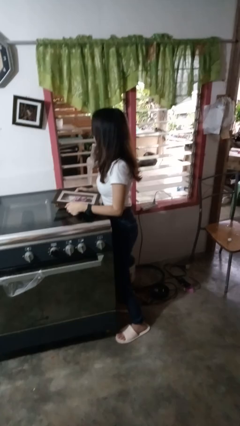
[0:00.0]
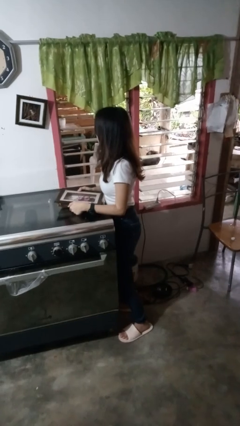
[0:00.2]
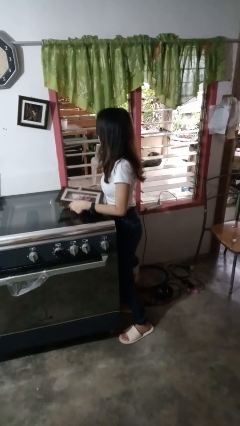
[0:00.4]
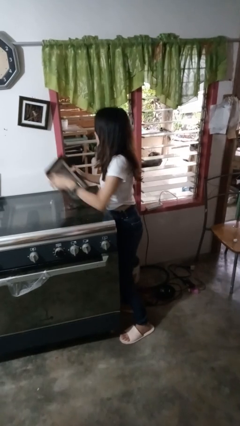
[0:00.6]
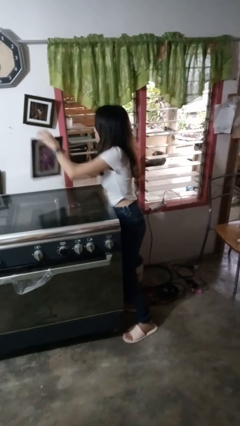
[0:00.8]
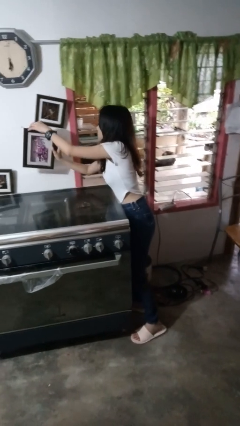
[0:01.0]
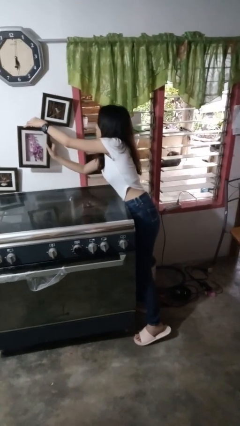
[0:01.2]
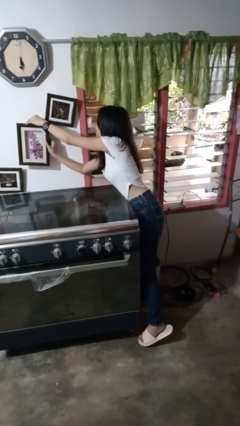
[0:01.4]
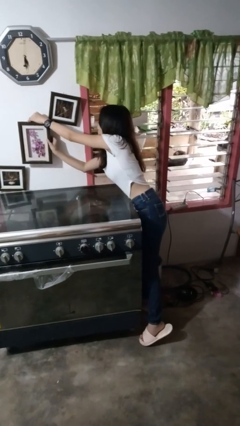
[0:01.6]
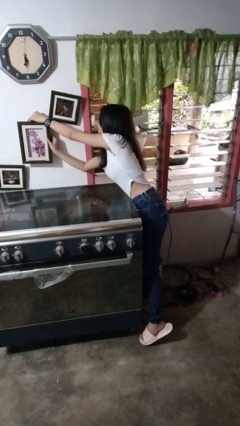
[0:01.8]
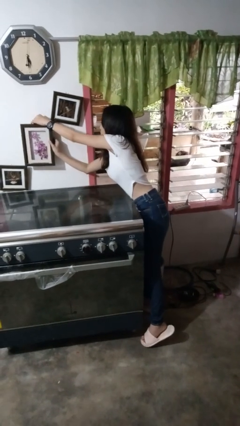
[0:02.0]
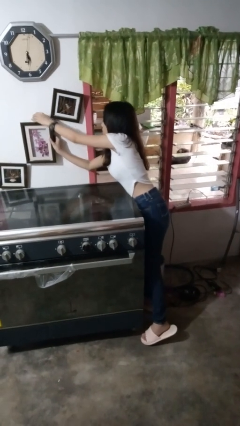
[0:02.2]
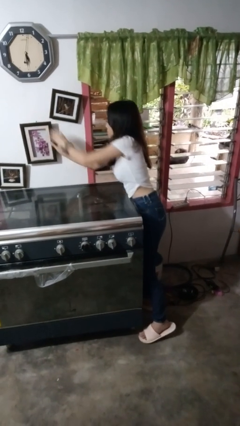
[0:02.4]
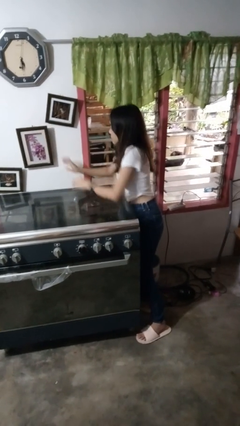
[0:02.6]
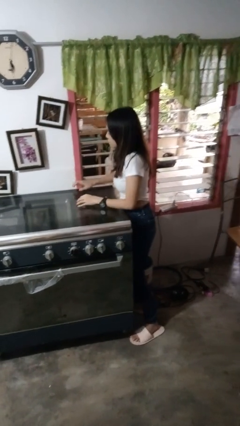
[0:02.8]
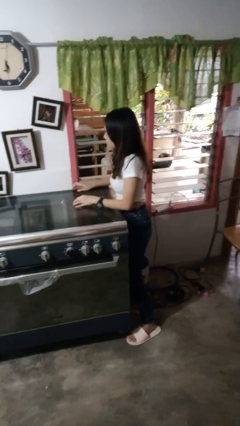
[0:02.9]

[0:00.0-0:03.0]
person puts up picture frame

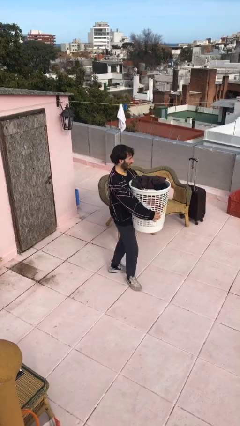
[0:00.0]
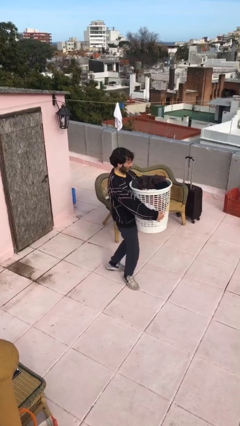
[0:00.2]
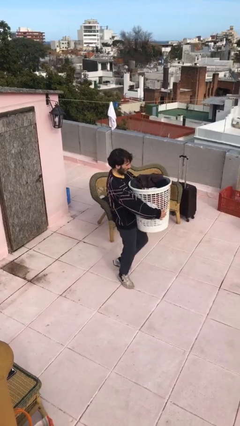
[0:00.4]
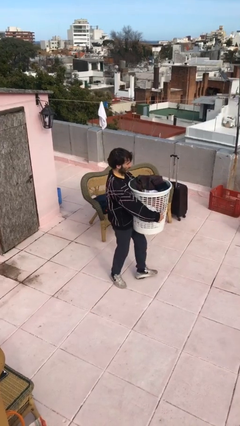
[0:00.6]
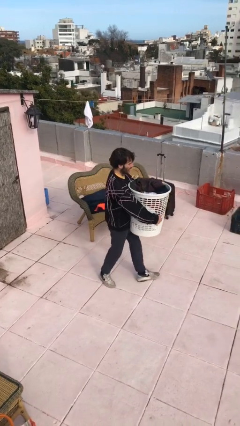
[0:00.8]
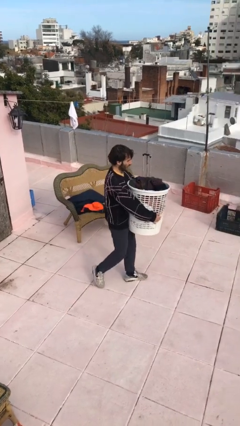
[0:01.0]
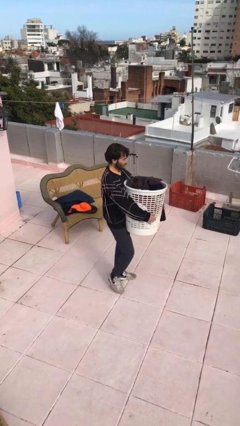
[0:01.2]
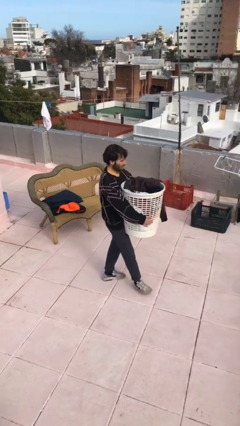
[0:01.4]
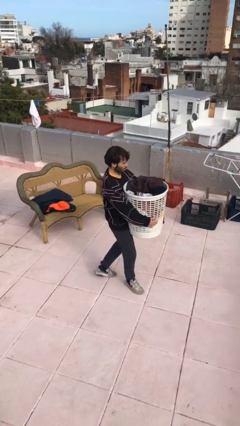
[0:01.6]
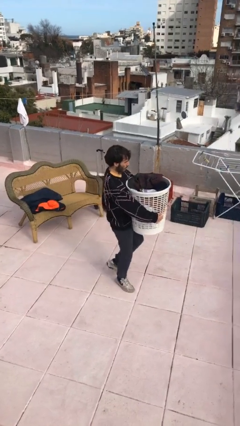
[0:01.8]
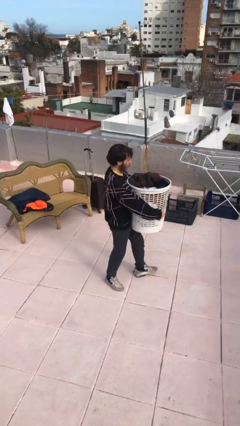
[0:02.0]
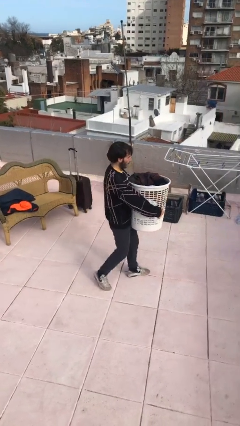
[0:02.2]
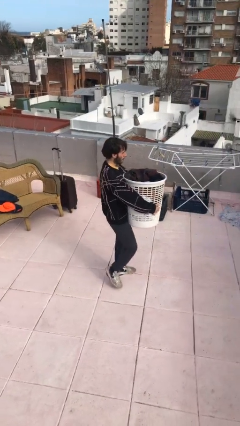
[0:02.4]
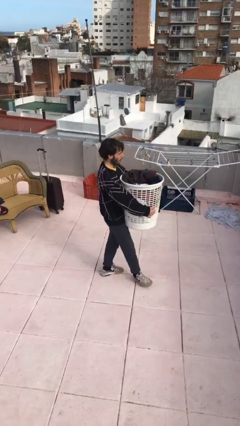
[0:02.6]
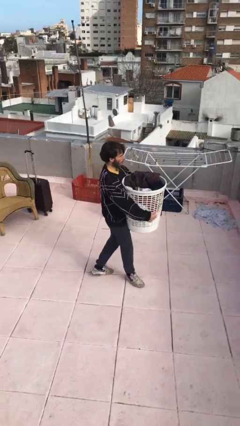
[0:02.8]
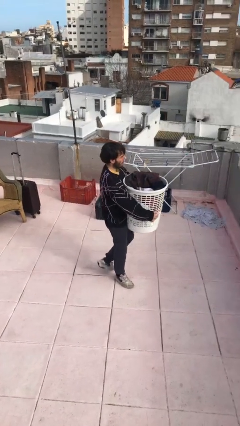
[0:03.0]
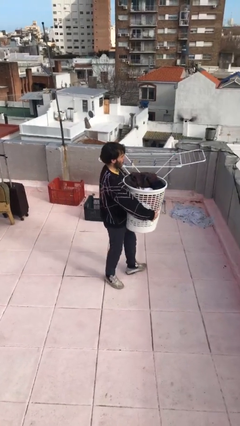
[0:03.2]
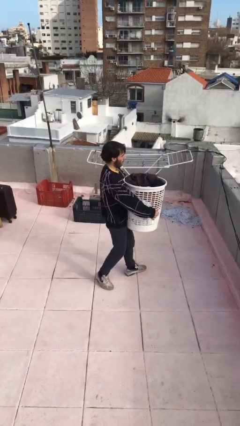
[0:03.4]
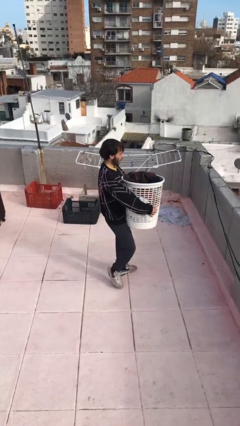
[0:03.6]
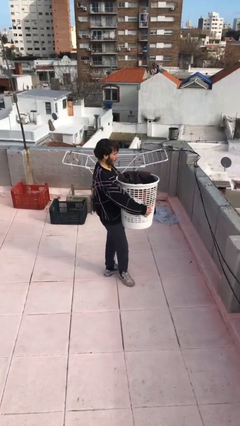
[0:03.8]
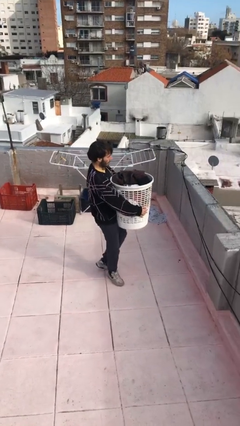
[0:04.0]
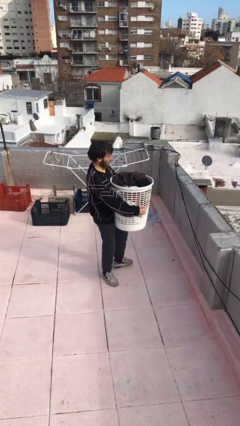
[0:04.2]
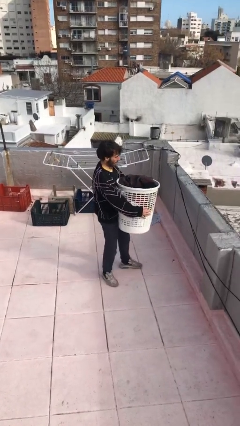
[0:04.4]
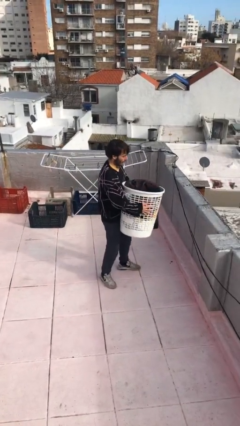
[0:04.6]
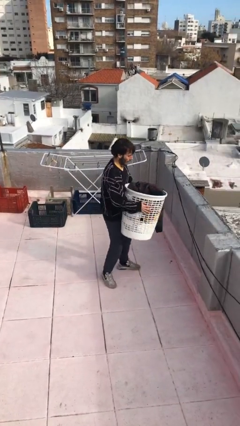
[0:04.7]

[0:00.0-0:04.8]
person carries laundry basket

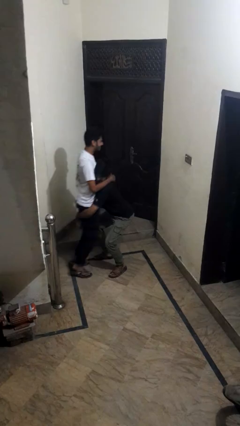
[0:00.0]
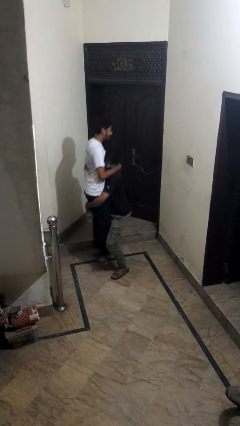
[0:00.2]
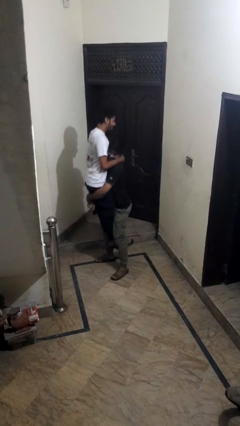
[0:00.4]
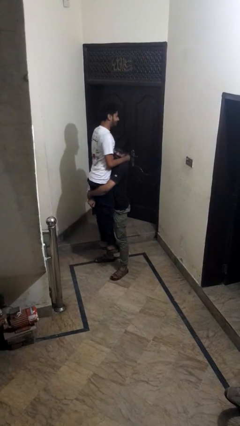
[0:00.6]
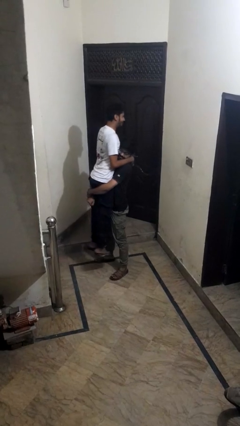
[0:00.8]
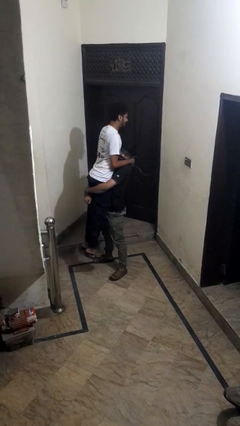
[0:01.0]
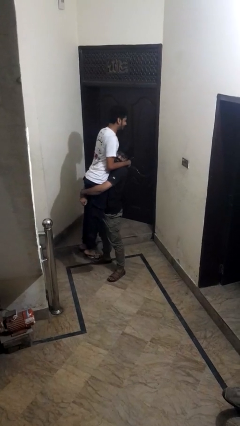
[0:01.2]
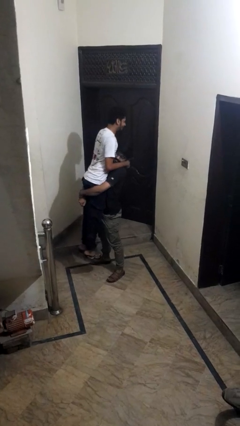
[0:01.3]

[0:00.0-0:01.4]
person takes off hat

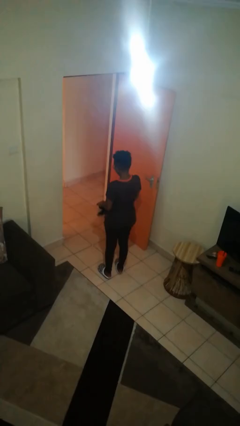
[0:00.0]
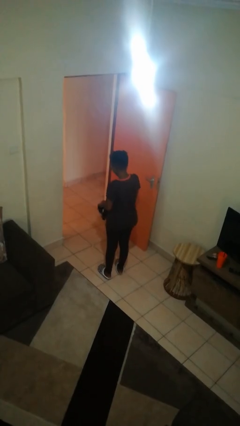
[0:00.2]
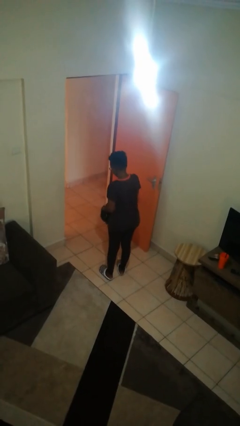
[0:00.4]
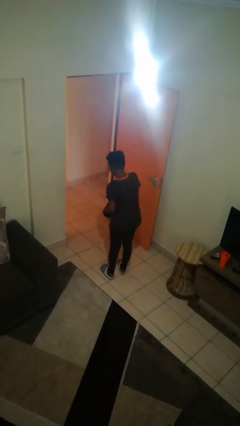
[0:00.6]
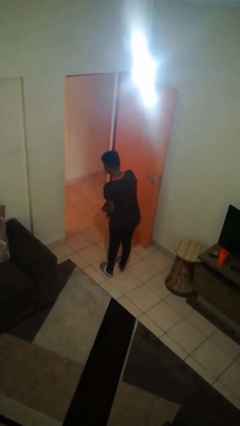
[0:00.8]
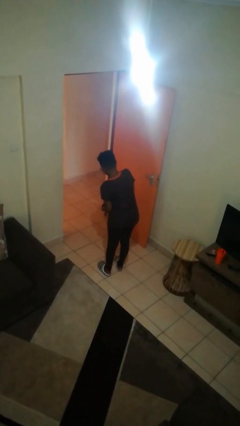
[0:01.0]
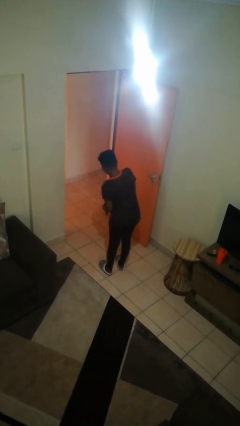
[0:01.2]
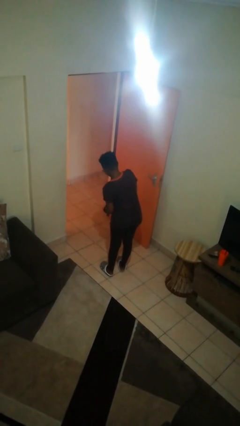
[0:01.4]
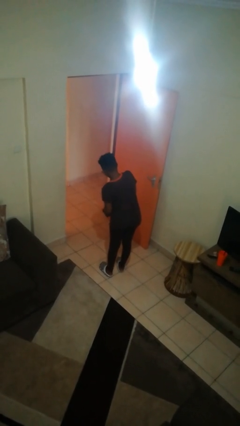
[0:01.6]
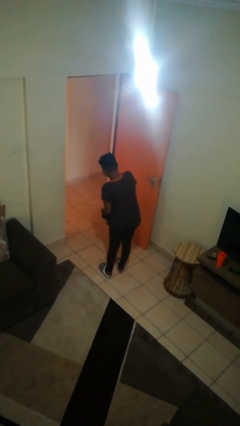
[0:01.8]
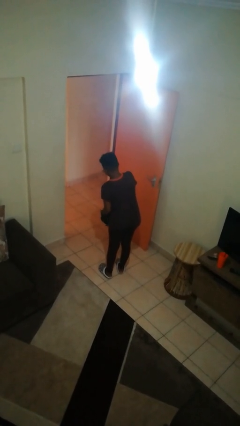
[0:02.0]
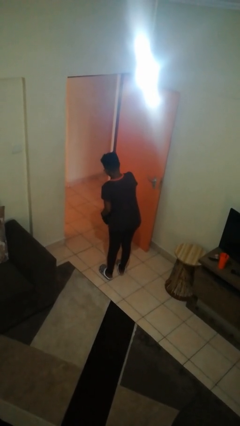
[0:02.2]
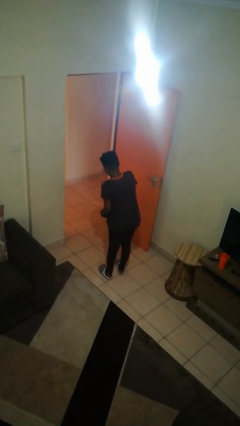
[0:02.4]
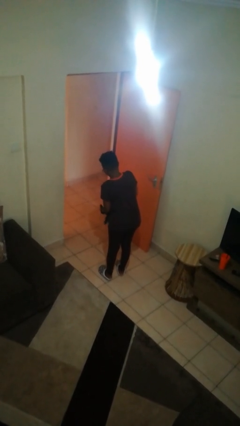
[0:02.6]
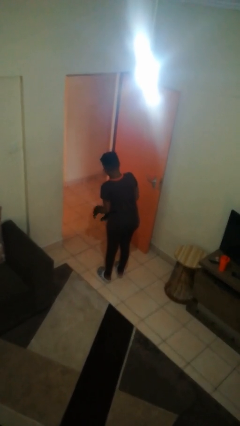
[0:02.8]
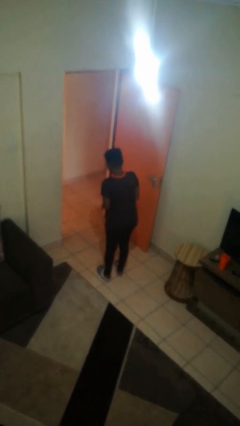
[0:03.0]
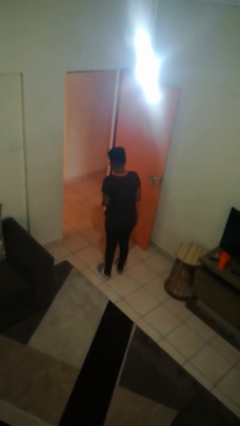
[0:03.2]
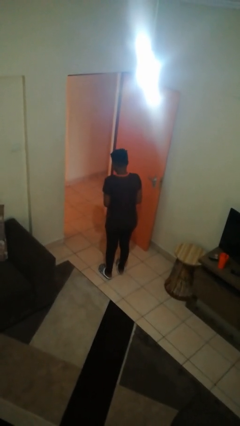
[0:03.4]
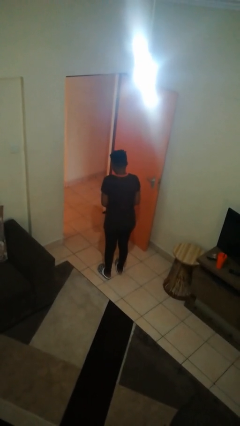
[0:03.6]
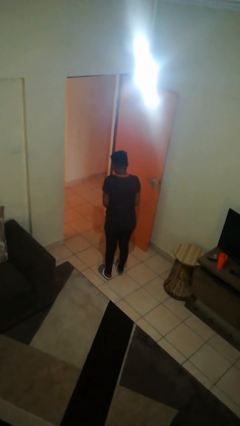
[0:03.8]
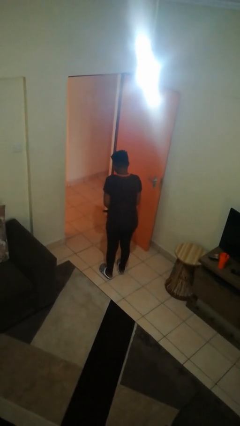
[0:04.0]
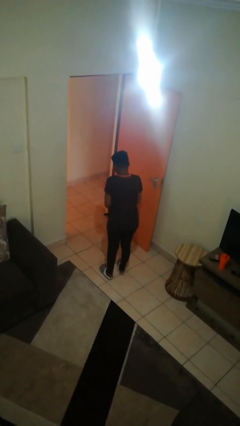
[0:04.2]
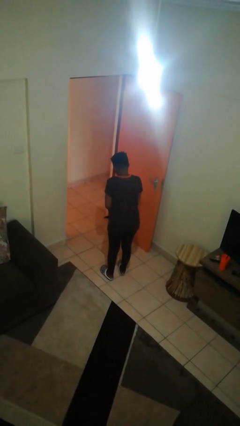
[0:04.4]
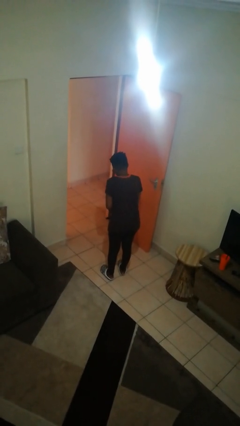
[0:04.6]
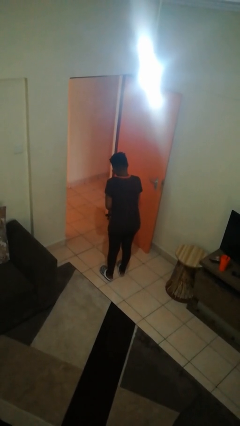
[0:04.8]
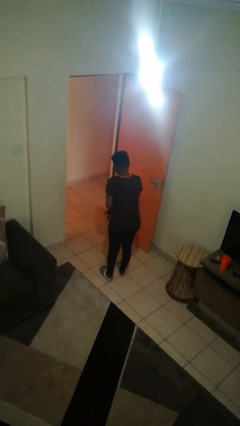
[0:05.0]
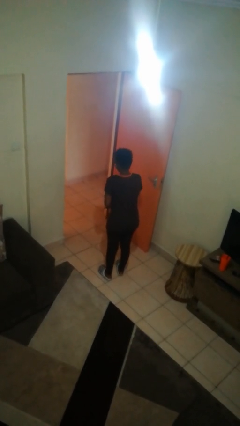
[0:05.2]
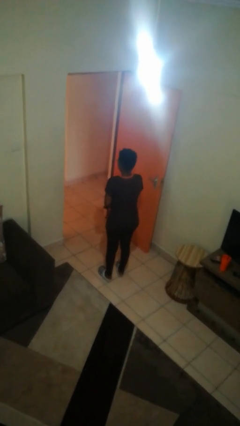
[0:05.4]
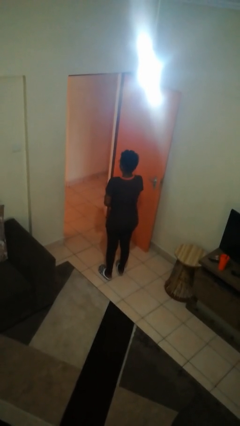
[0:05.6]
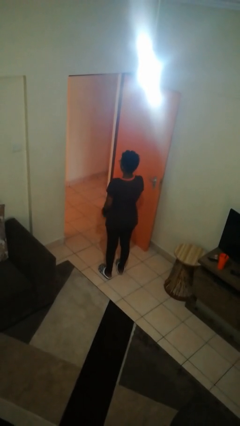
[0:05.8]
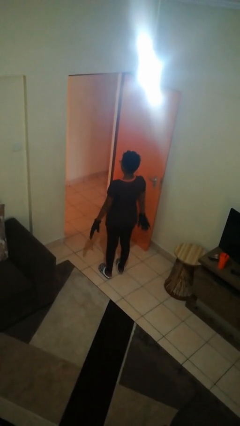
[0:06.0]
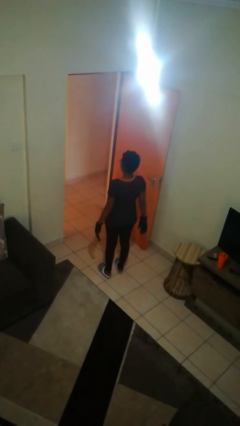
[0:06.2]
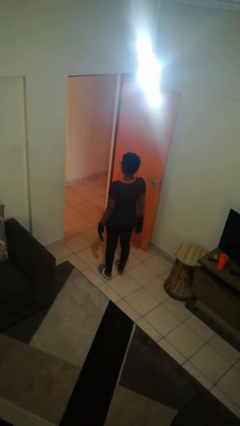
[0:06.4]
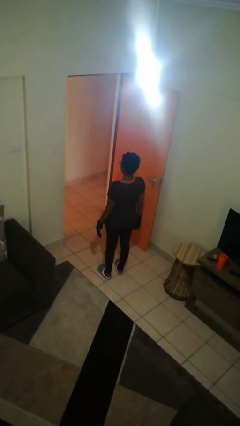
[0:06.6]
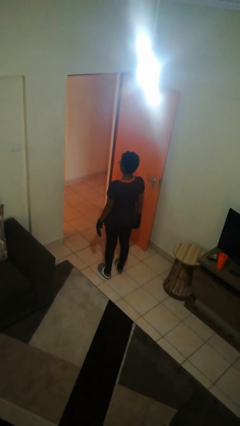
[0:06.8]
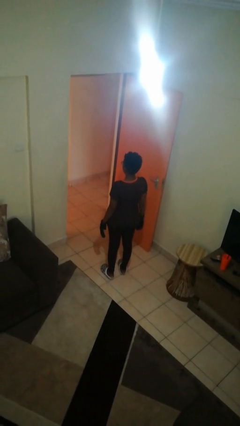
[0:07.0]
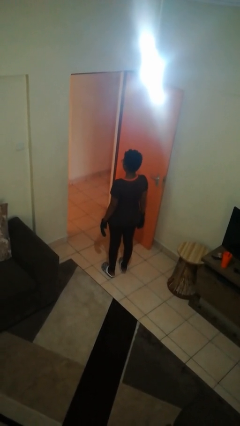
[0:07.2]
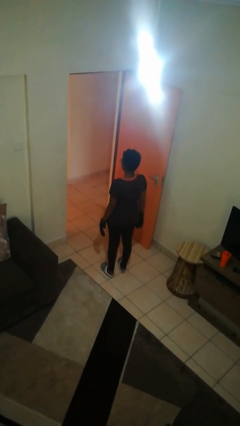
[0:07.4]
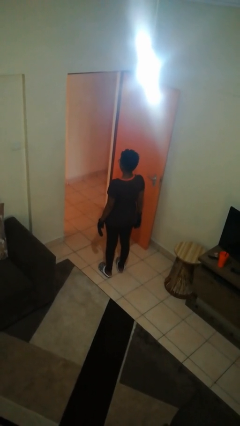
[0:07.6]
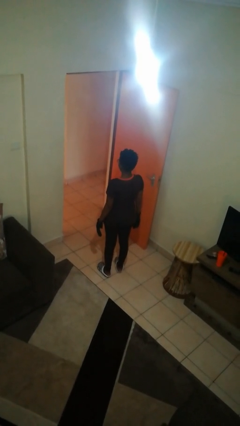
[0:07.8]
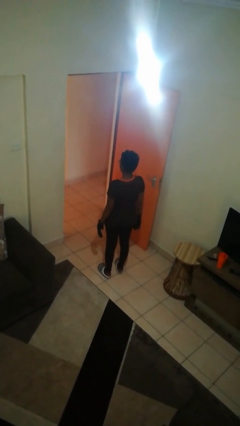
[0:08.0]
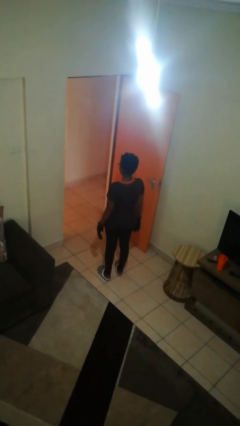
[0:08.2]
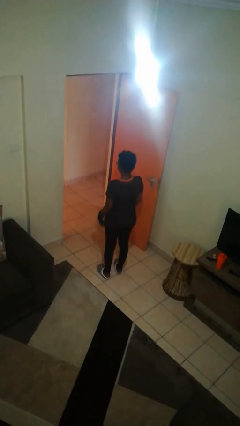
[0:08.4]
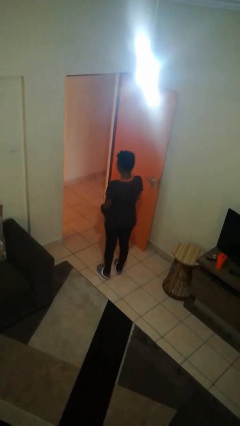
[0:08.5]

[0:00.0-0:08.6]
person puts on gloves
